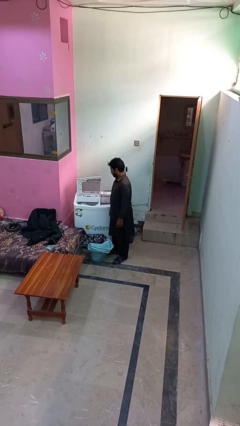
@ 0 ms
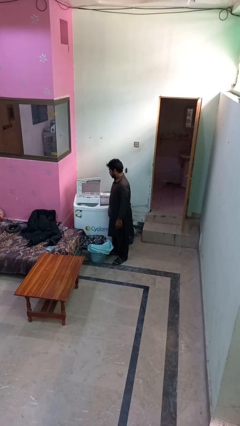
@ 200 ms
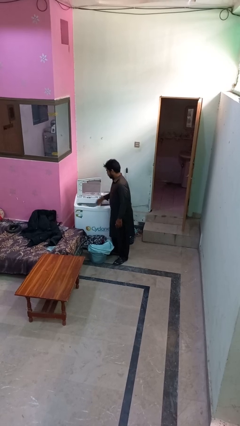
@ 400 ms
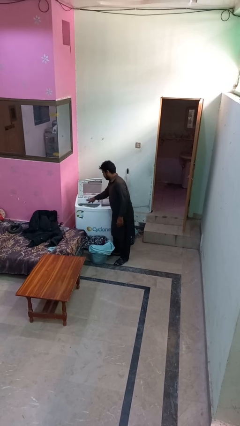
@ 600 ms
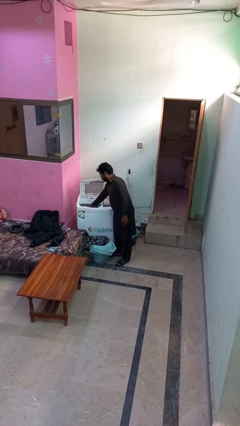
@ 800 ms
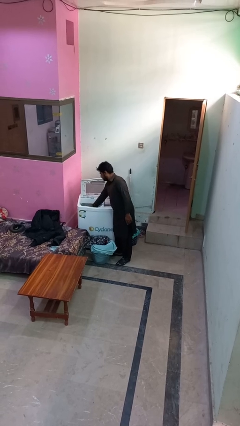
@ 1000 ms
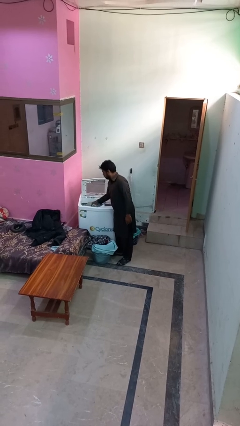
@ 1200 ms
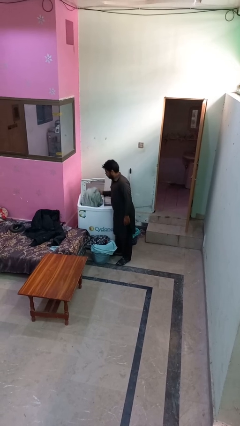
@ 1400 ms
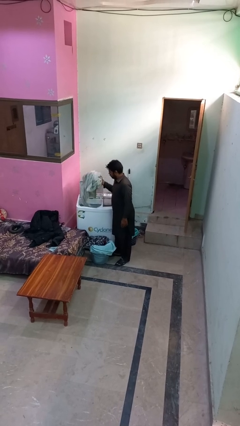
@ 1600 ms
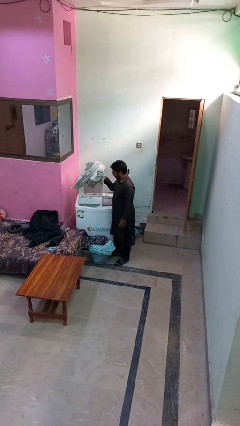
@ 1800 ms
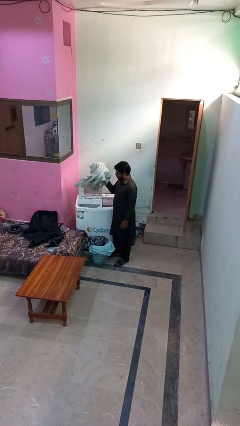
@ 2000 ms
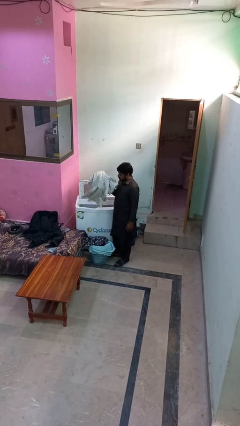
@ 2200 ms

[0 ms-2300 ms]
person unloads clotheswasher

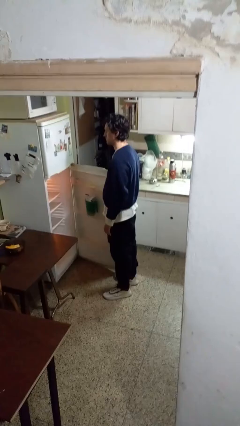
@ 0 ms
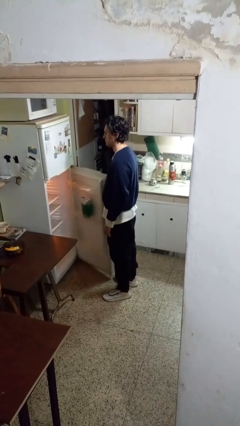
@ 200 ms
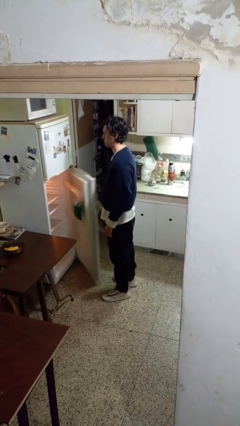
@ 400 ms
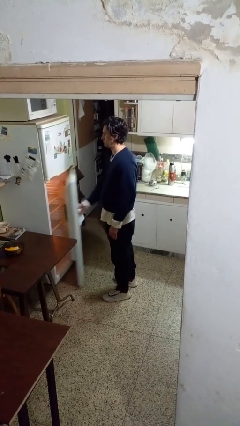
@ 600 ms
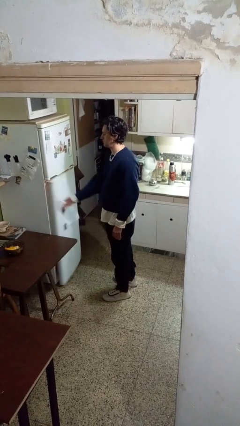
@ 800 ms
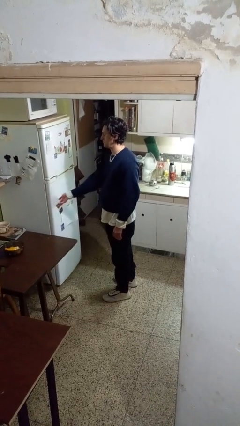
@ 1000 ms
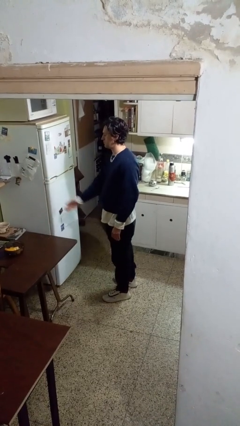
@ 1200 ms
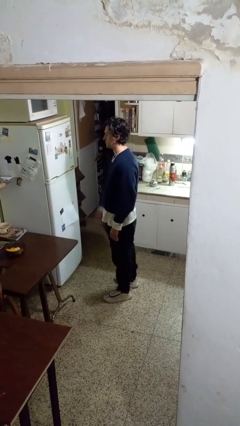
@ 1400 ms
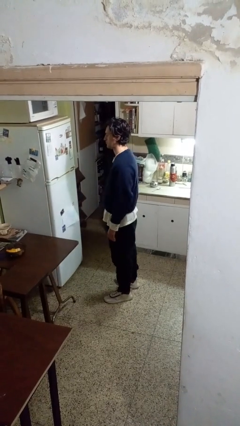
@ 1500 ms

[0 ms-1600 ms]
person closes refrigerator

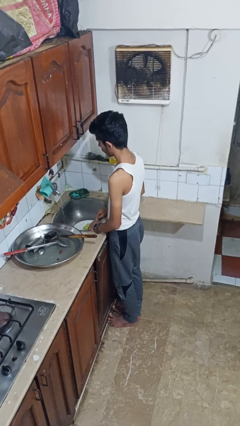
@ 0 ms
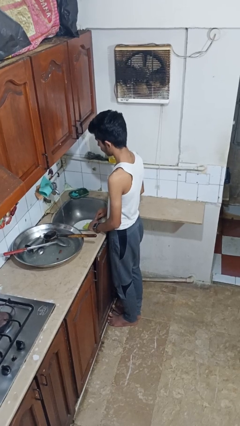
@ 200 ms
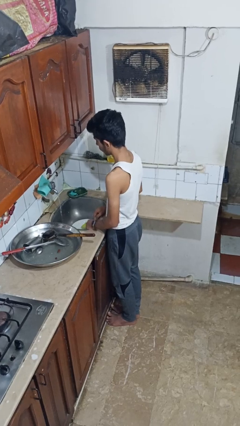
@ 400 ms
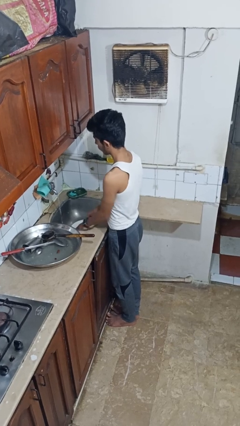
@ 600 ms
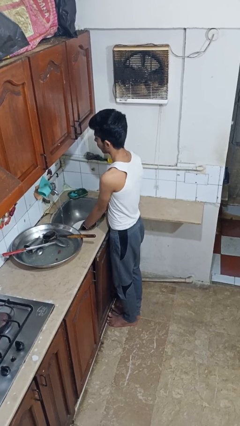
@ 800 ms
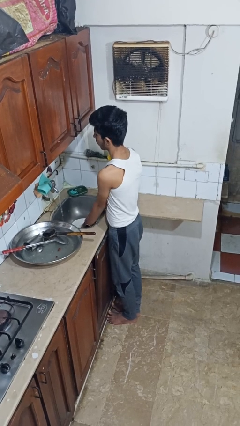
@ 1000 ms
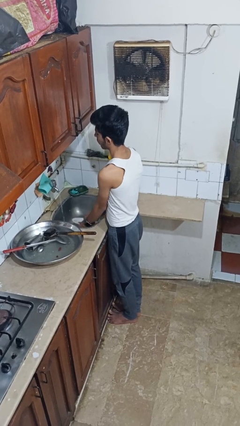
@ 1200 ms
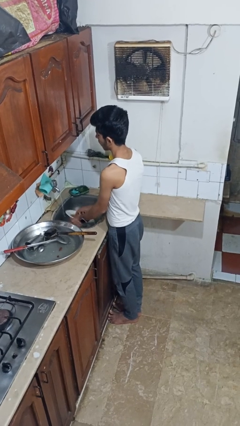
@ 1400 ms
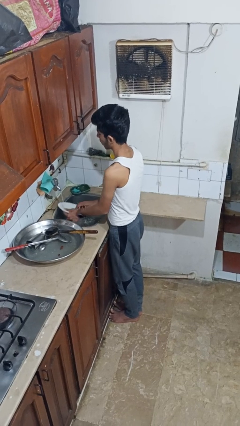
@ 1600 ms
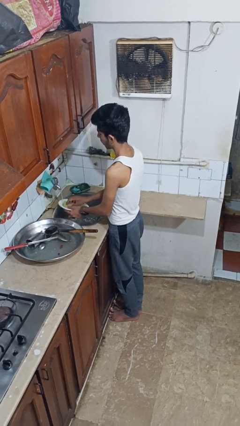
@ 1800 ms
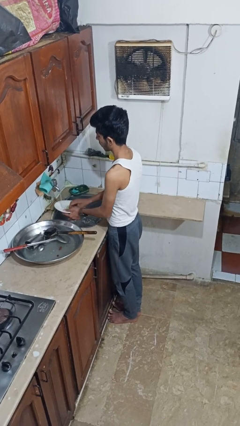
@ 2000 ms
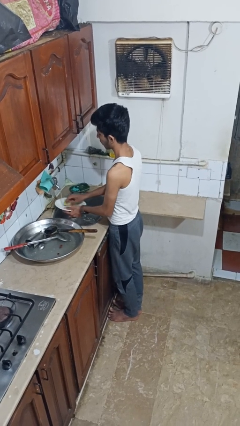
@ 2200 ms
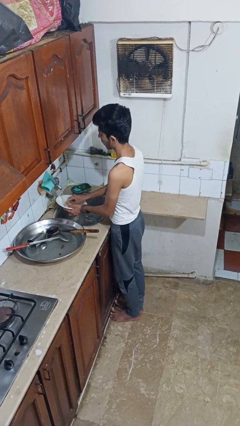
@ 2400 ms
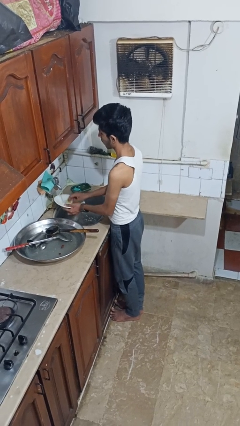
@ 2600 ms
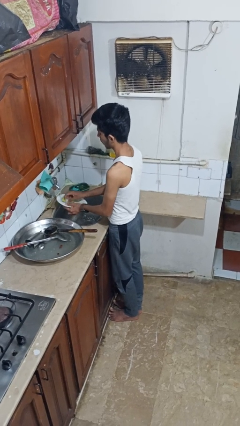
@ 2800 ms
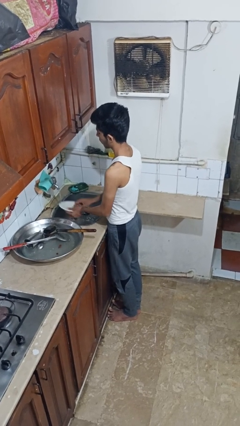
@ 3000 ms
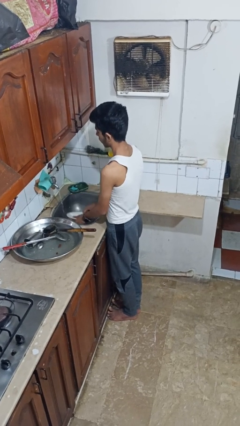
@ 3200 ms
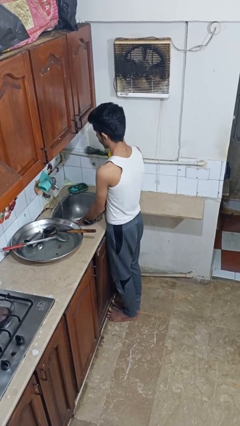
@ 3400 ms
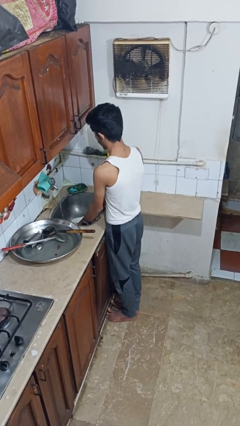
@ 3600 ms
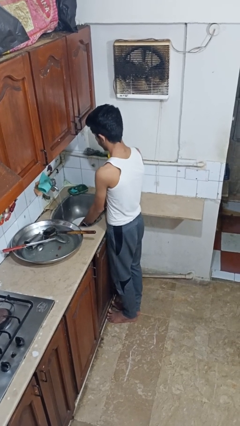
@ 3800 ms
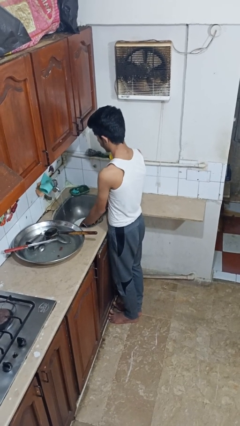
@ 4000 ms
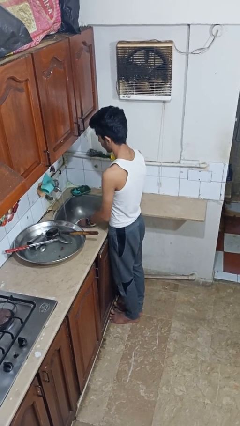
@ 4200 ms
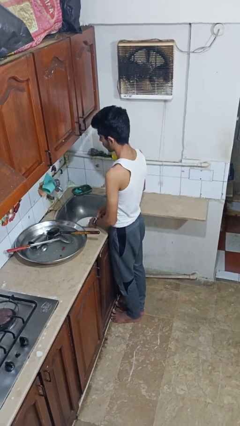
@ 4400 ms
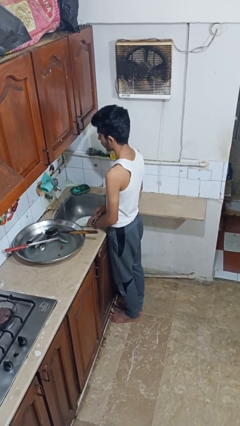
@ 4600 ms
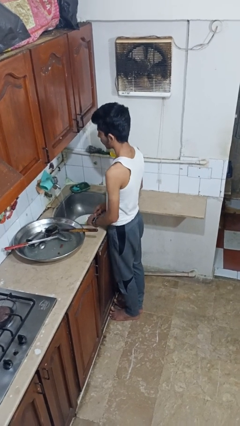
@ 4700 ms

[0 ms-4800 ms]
person washes dish

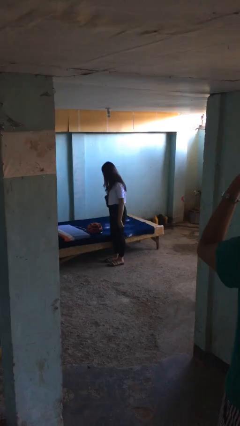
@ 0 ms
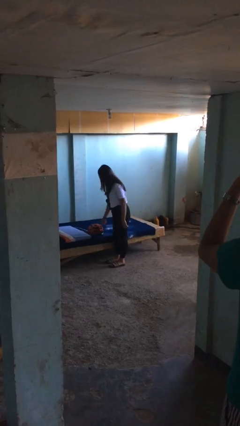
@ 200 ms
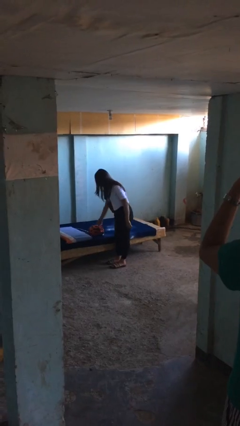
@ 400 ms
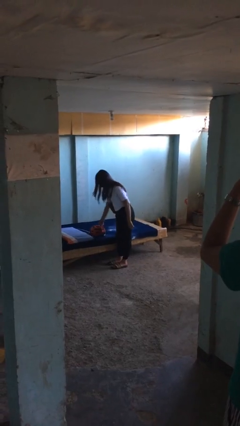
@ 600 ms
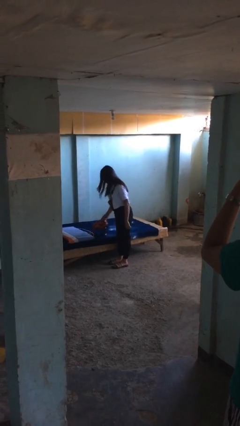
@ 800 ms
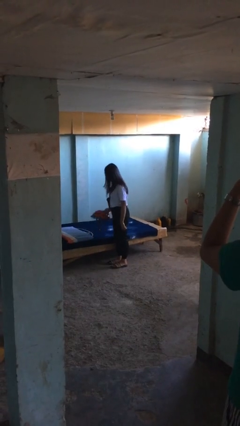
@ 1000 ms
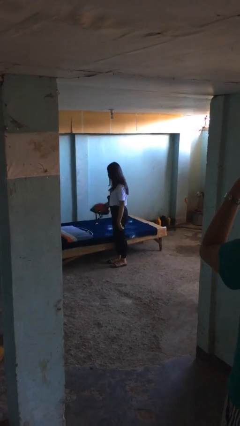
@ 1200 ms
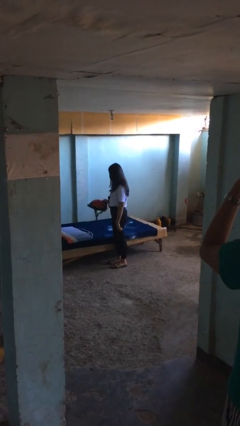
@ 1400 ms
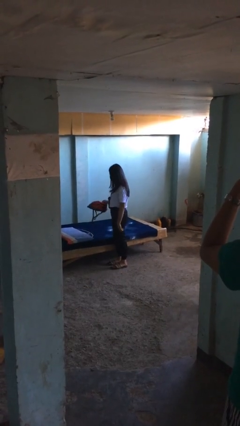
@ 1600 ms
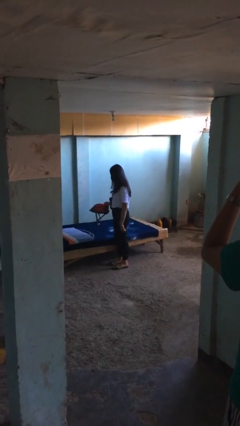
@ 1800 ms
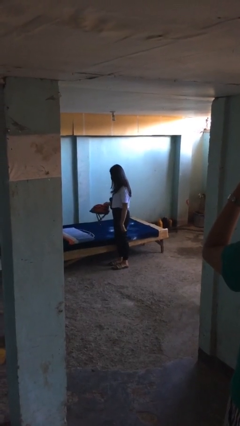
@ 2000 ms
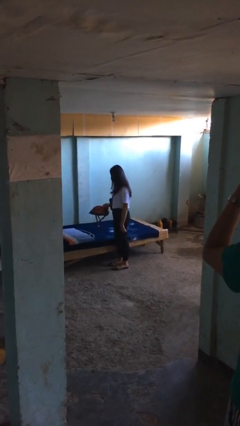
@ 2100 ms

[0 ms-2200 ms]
person picks up object from bed

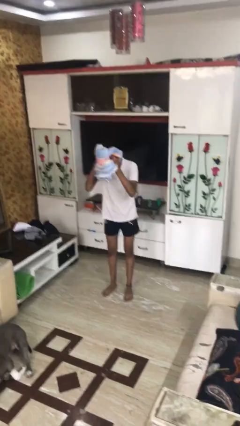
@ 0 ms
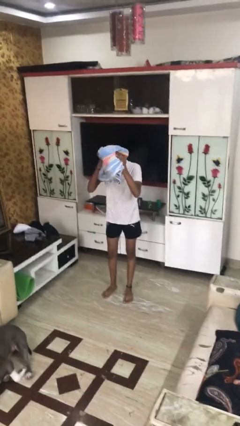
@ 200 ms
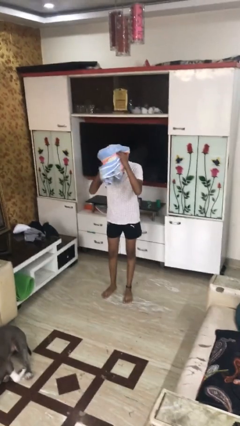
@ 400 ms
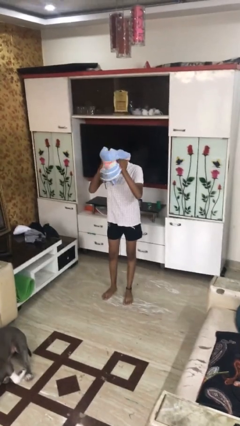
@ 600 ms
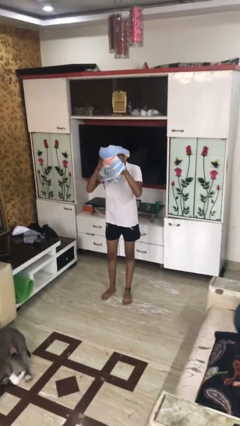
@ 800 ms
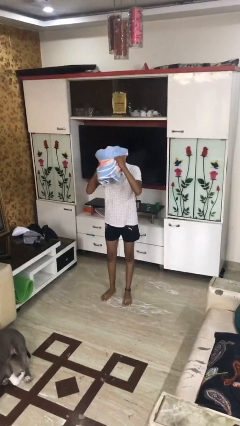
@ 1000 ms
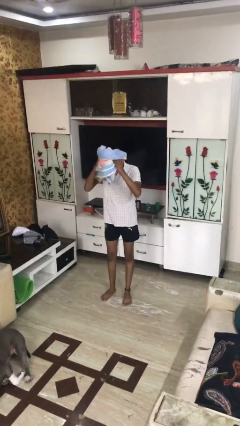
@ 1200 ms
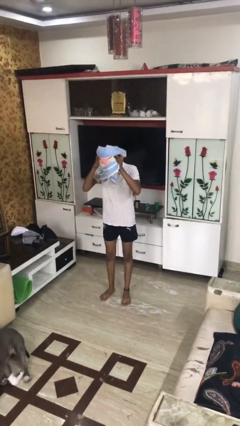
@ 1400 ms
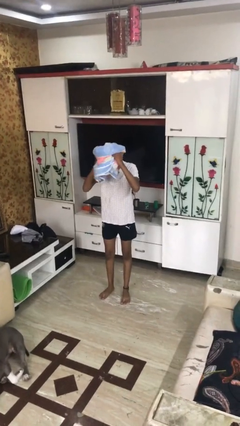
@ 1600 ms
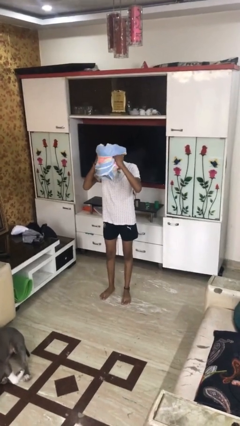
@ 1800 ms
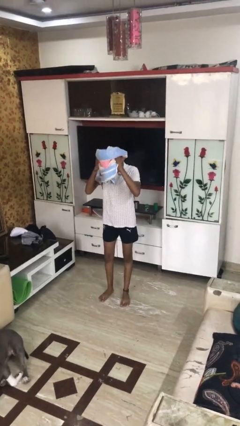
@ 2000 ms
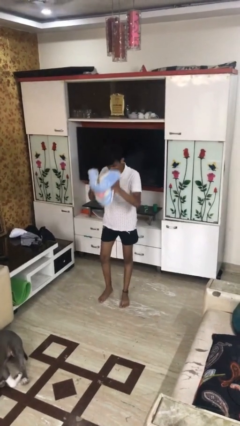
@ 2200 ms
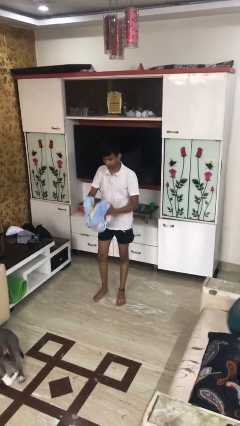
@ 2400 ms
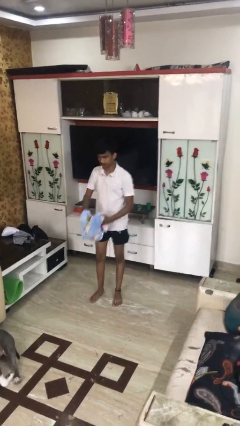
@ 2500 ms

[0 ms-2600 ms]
person dries hair with towel

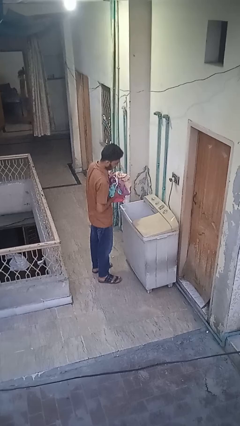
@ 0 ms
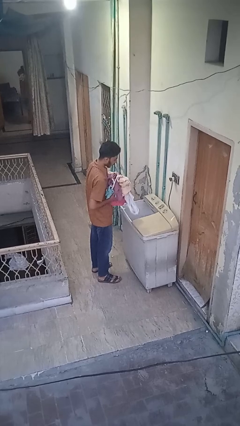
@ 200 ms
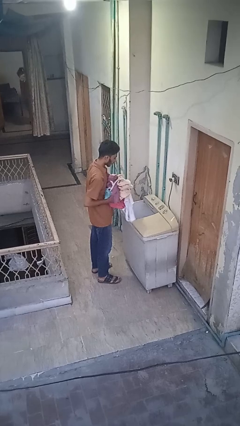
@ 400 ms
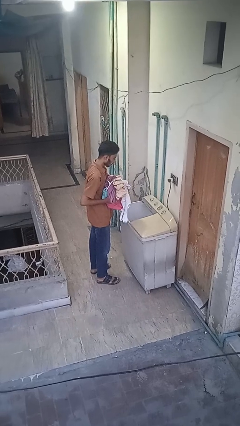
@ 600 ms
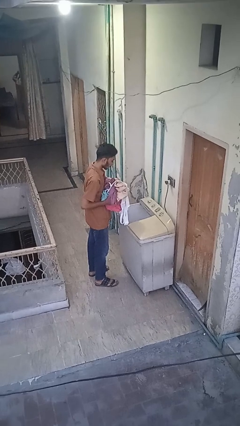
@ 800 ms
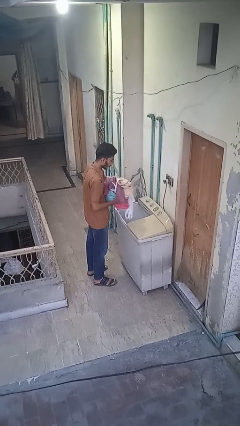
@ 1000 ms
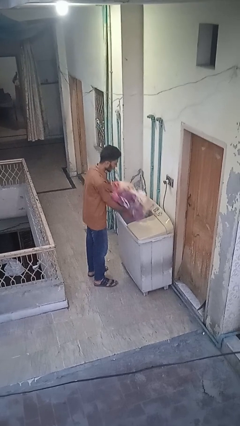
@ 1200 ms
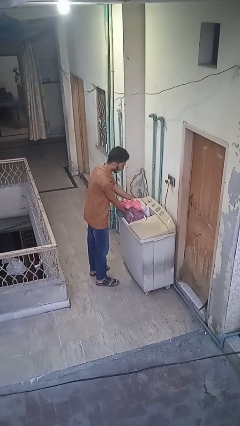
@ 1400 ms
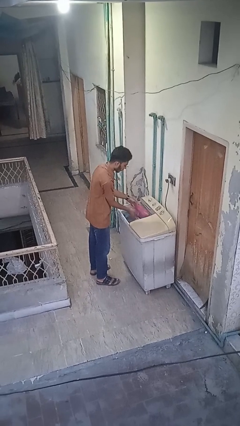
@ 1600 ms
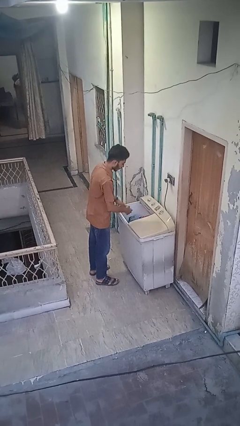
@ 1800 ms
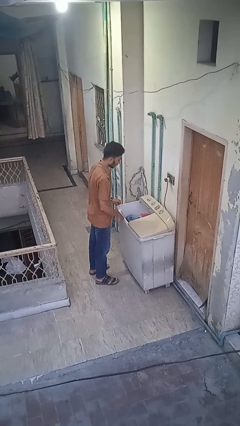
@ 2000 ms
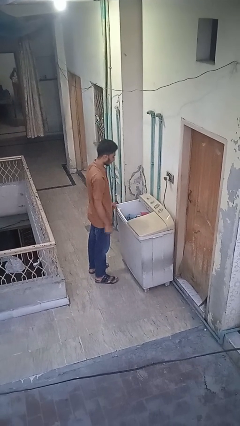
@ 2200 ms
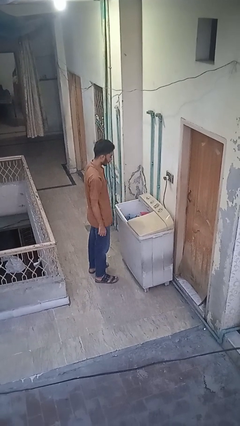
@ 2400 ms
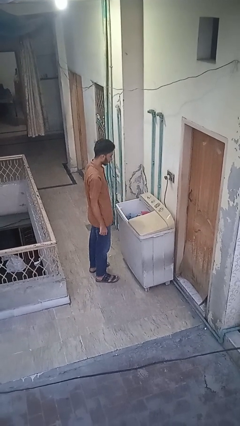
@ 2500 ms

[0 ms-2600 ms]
person loads clotheswasher

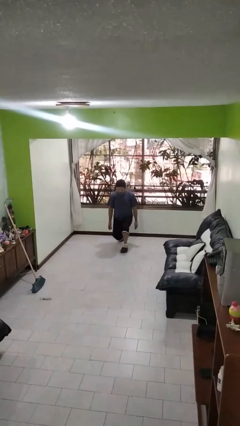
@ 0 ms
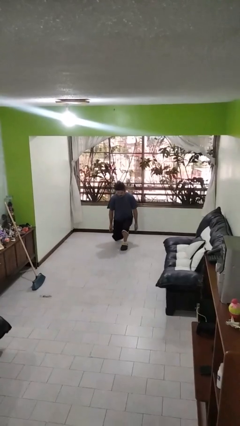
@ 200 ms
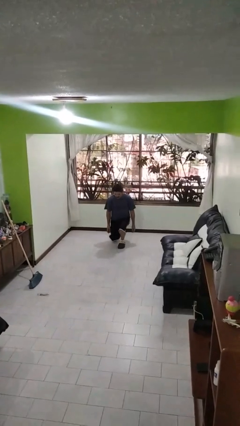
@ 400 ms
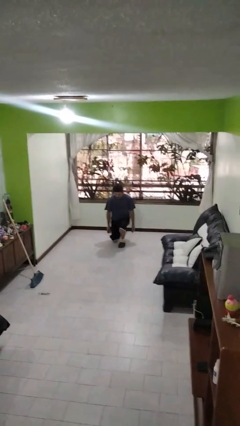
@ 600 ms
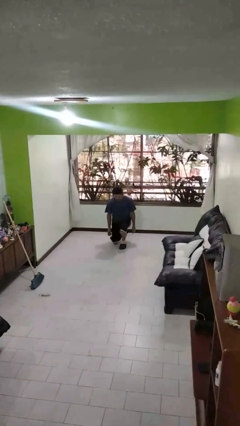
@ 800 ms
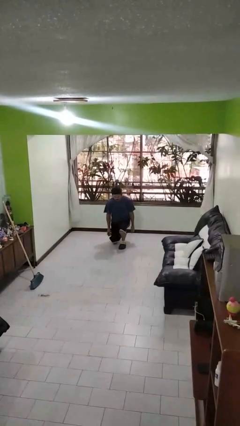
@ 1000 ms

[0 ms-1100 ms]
person kneels
